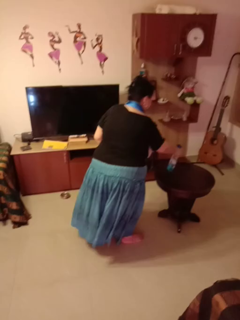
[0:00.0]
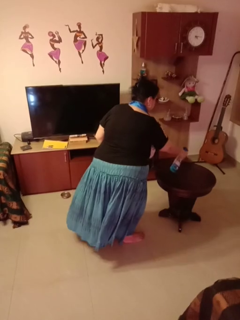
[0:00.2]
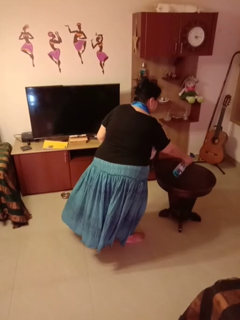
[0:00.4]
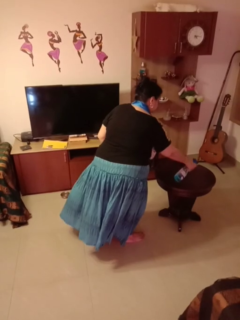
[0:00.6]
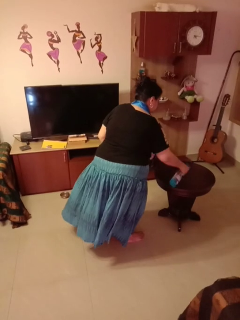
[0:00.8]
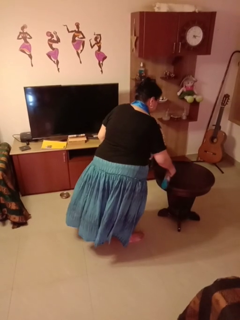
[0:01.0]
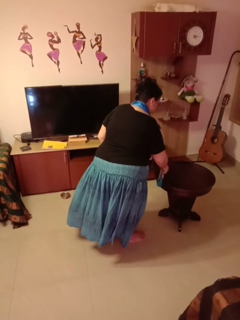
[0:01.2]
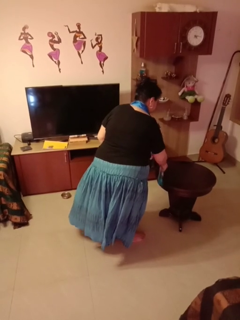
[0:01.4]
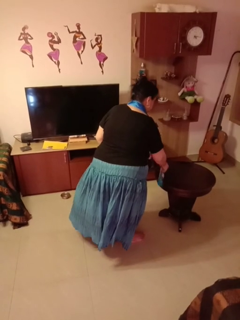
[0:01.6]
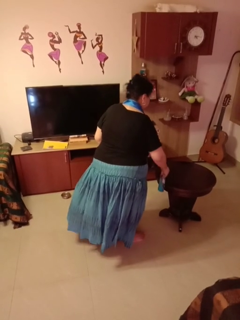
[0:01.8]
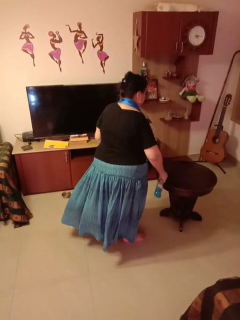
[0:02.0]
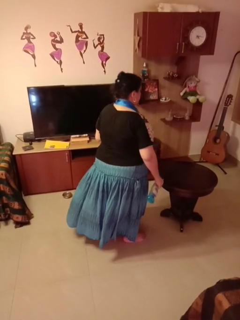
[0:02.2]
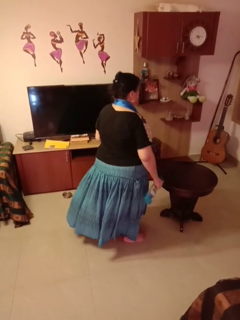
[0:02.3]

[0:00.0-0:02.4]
person sprays from bottle

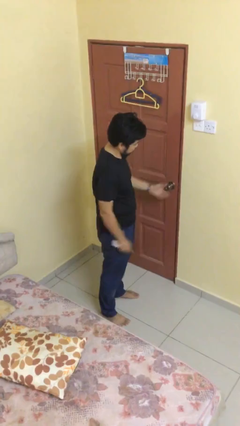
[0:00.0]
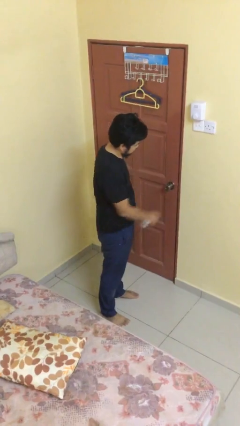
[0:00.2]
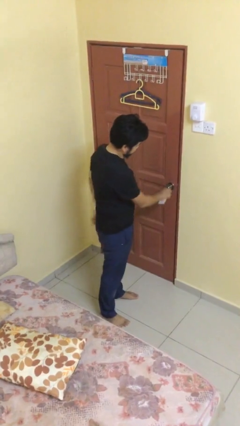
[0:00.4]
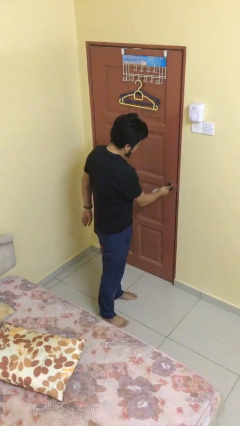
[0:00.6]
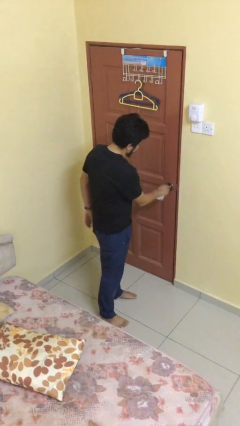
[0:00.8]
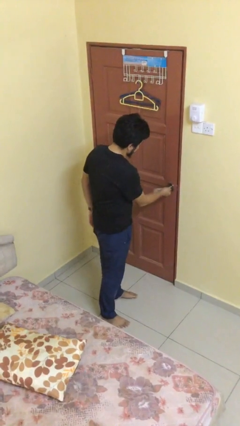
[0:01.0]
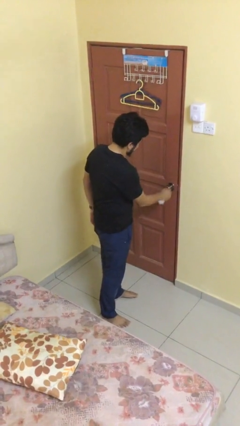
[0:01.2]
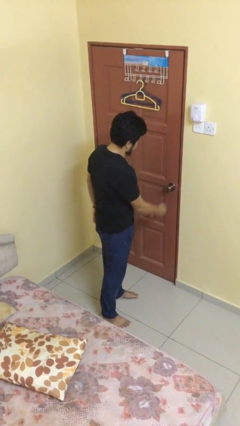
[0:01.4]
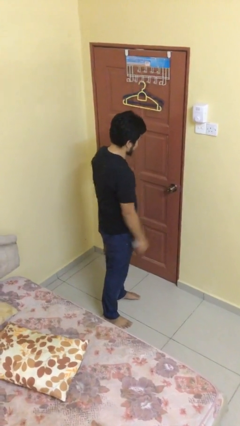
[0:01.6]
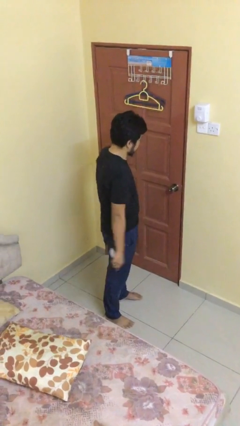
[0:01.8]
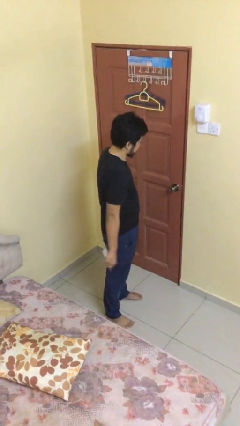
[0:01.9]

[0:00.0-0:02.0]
person locks door with keys

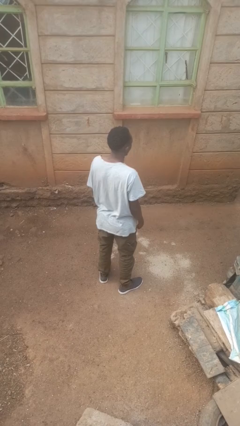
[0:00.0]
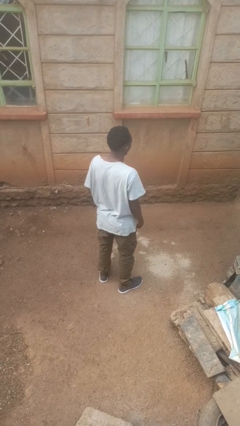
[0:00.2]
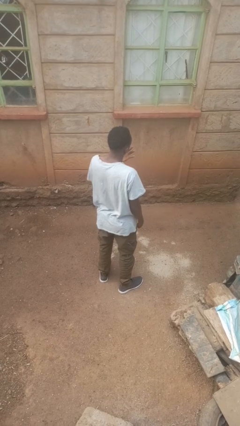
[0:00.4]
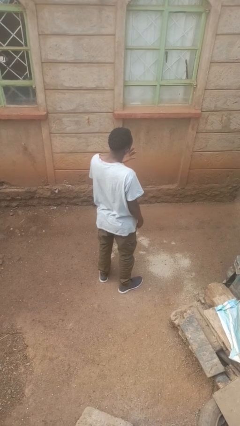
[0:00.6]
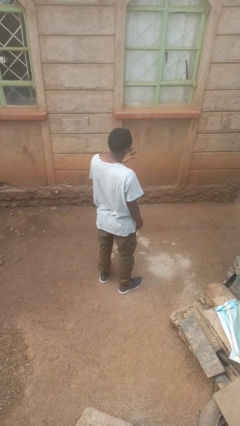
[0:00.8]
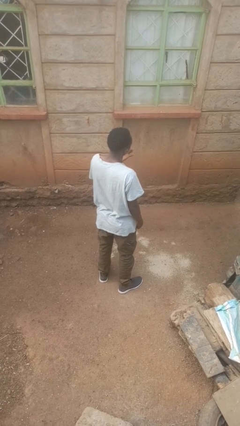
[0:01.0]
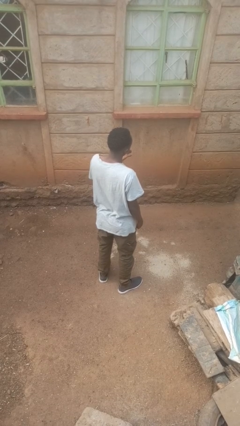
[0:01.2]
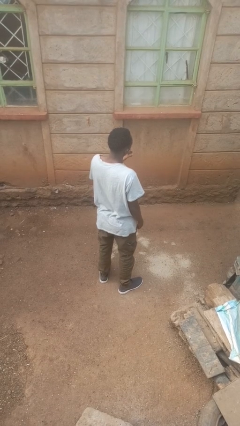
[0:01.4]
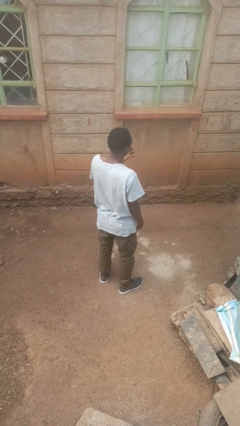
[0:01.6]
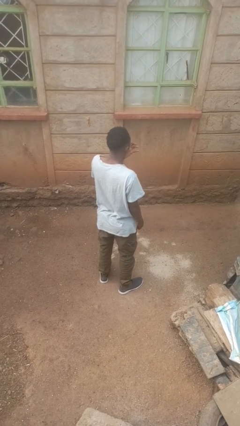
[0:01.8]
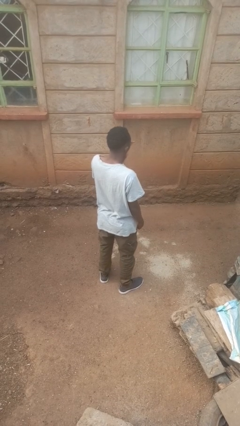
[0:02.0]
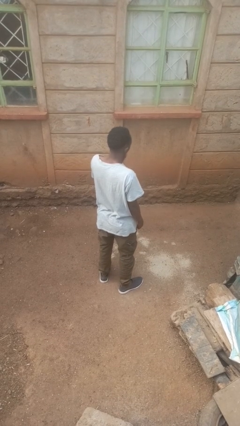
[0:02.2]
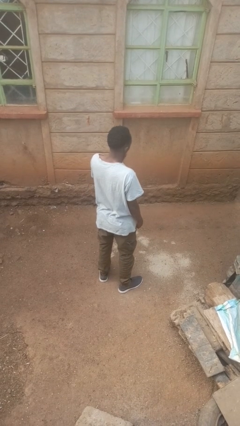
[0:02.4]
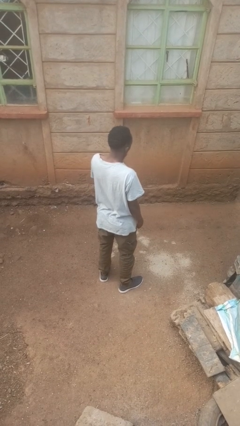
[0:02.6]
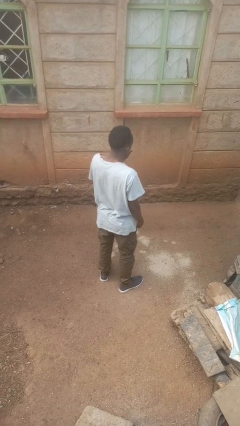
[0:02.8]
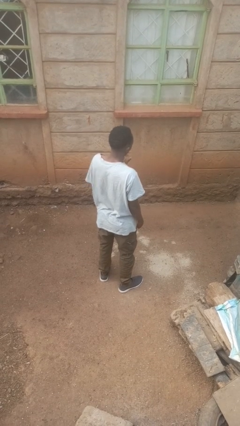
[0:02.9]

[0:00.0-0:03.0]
person licks fingers

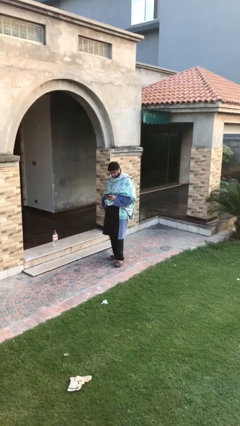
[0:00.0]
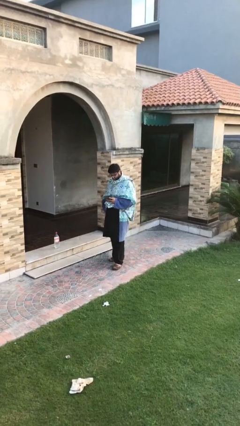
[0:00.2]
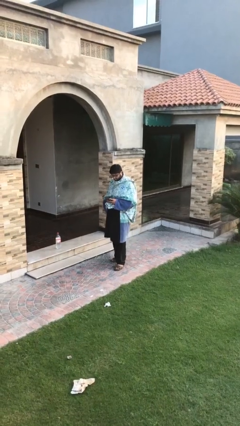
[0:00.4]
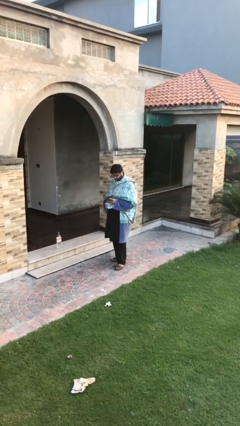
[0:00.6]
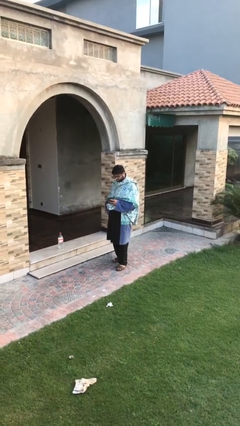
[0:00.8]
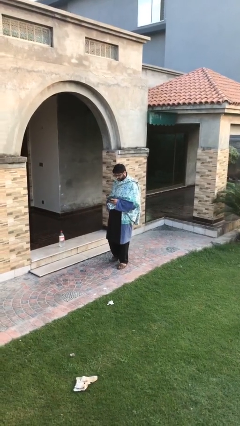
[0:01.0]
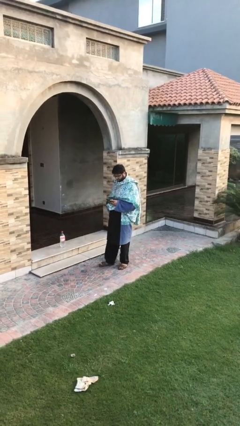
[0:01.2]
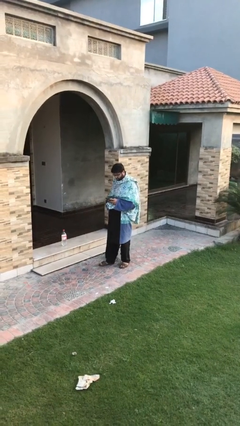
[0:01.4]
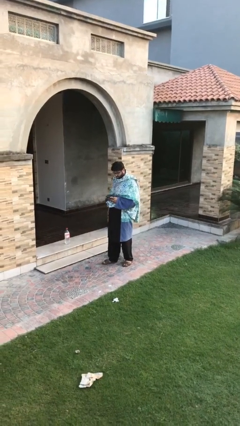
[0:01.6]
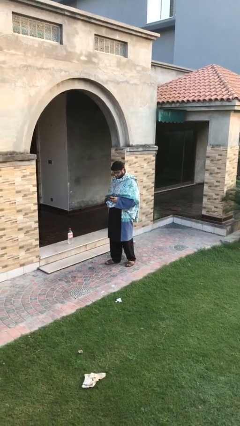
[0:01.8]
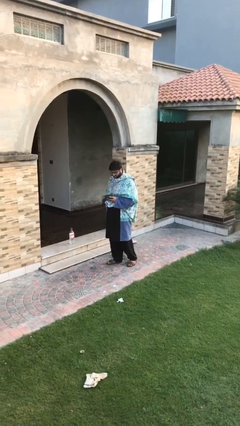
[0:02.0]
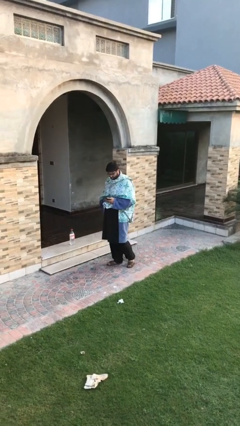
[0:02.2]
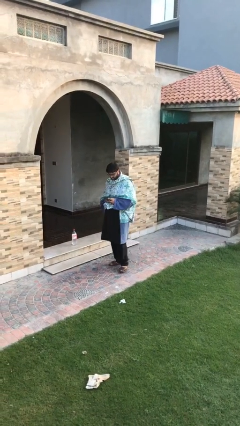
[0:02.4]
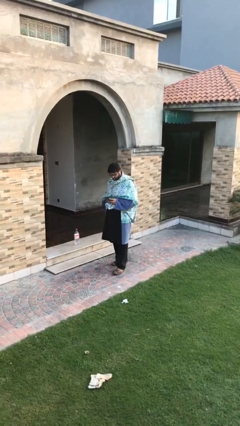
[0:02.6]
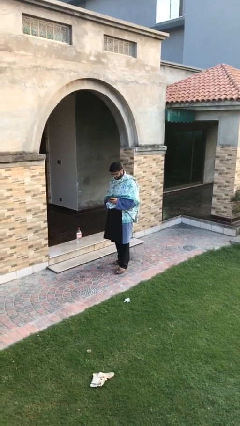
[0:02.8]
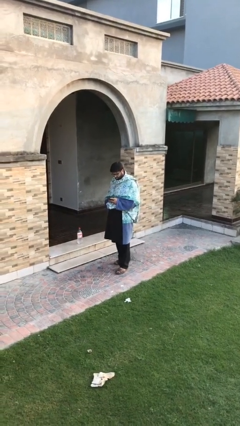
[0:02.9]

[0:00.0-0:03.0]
person texts on phone

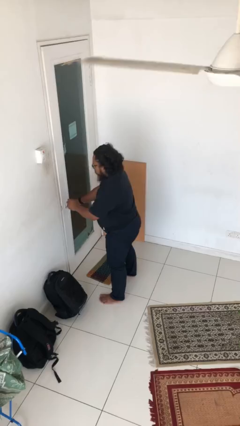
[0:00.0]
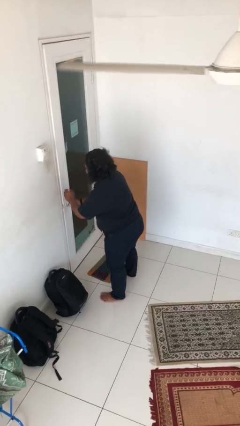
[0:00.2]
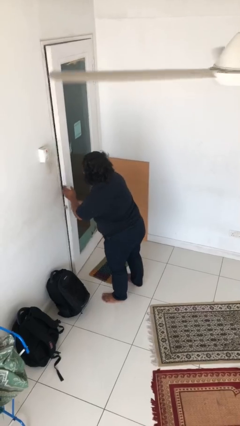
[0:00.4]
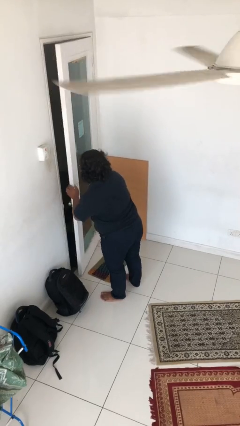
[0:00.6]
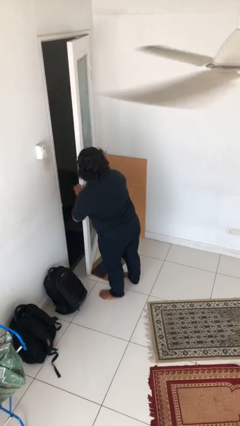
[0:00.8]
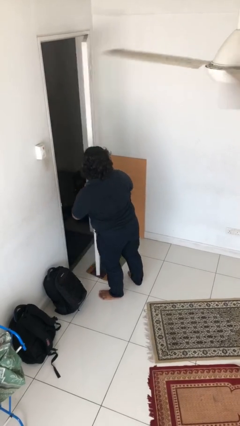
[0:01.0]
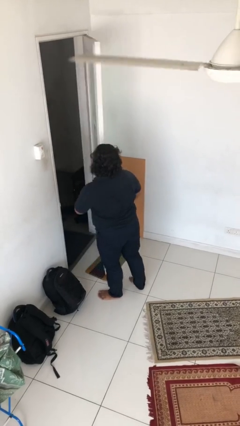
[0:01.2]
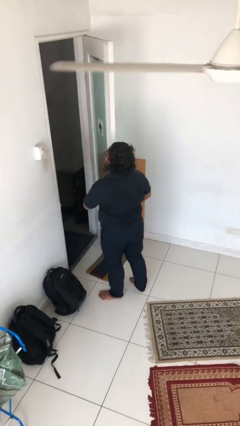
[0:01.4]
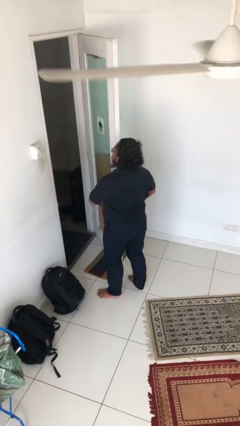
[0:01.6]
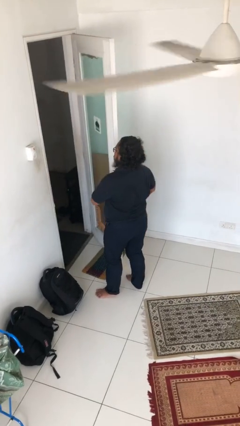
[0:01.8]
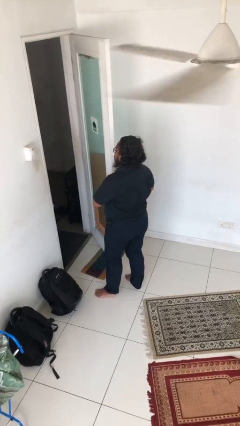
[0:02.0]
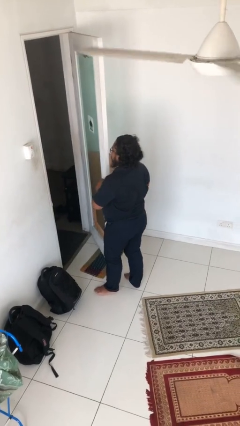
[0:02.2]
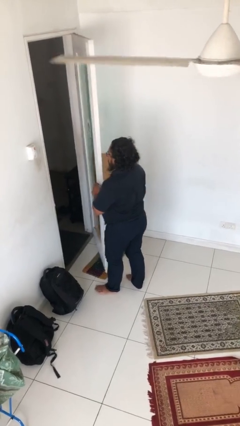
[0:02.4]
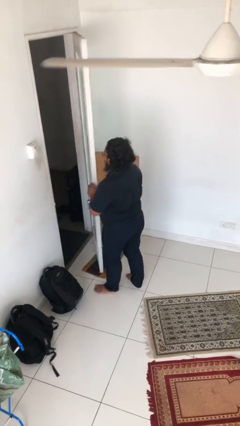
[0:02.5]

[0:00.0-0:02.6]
person opens facility door

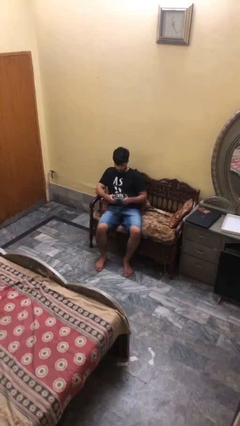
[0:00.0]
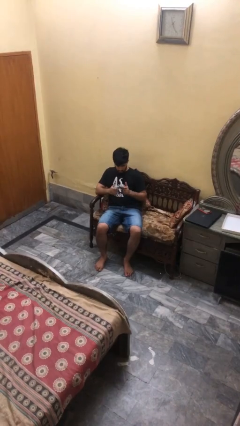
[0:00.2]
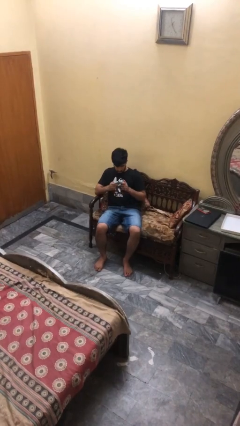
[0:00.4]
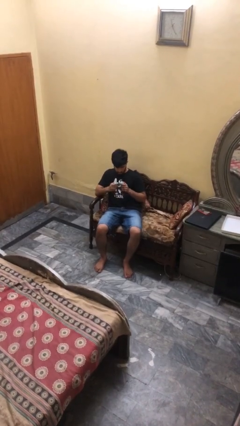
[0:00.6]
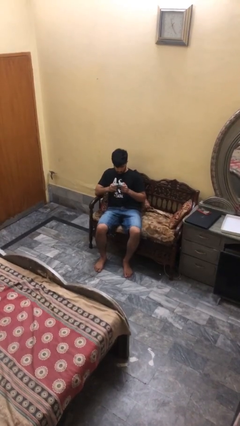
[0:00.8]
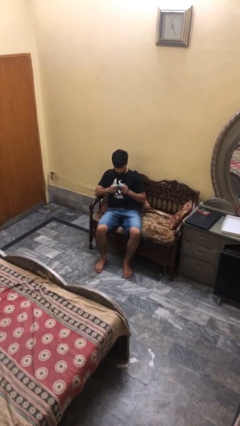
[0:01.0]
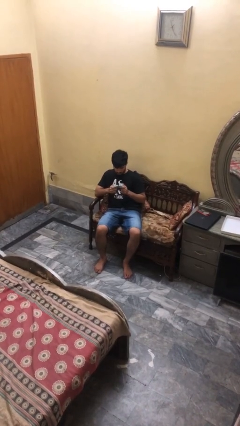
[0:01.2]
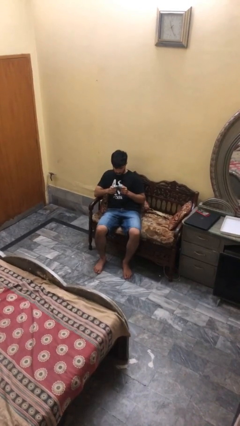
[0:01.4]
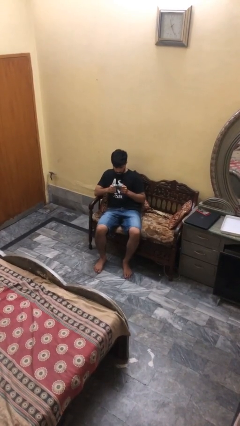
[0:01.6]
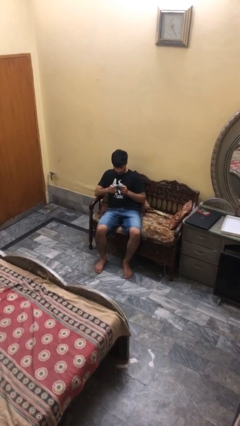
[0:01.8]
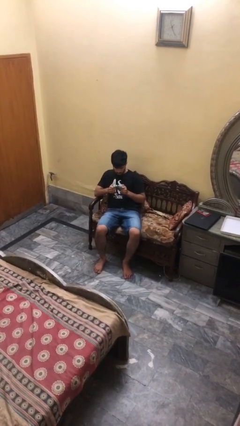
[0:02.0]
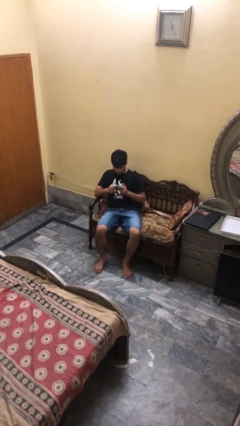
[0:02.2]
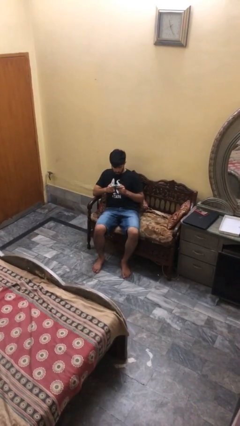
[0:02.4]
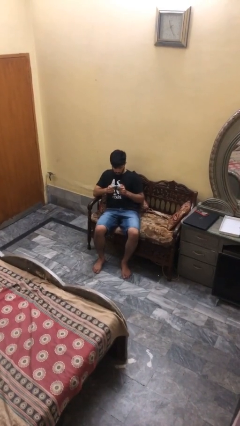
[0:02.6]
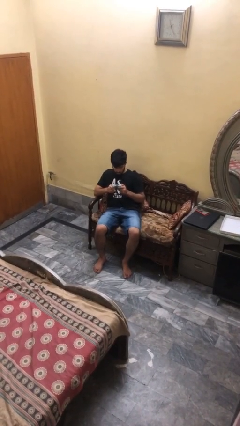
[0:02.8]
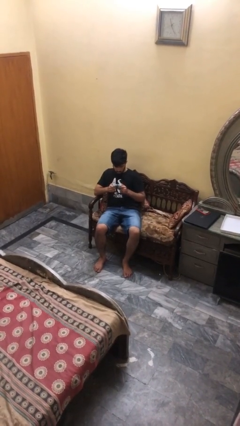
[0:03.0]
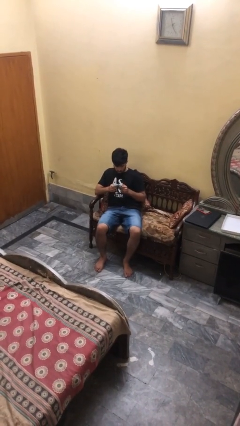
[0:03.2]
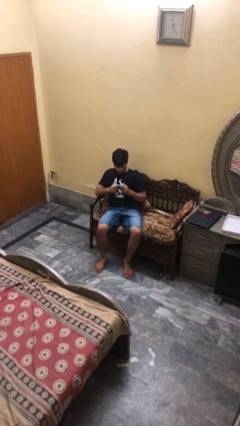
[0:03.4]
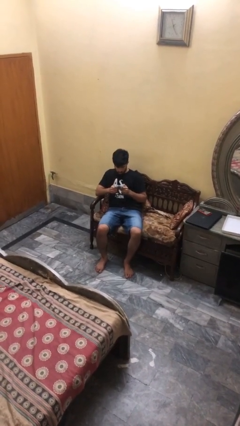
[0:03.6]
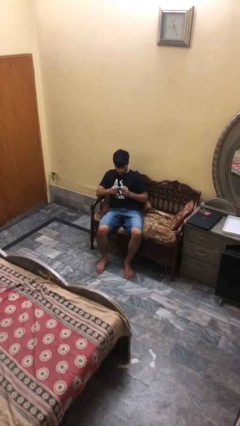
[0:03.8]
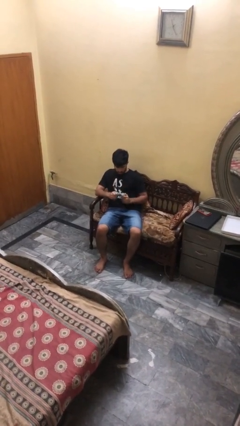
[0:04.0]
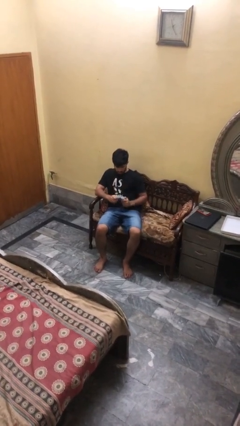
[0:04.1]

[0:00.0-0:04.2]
person interacts with handheld game

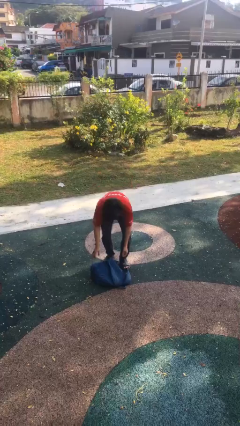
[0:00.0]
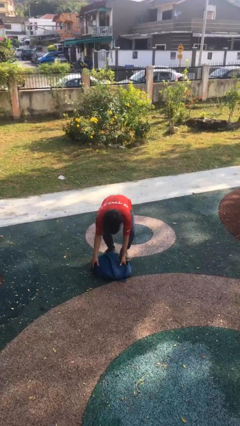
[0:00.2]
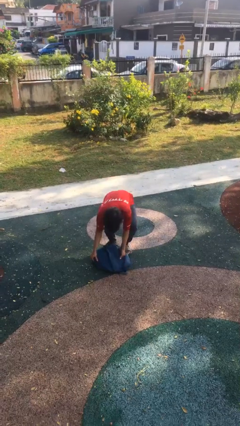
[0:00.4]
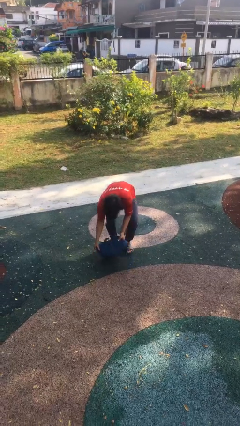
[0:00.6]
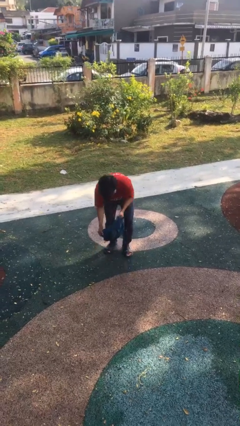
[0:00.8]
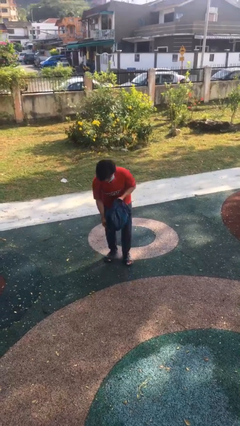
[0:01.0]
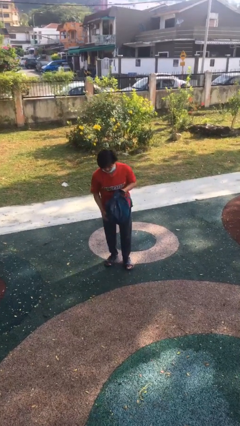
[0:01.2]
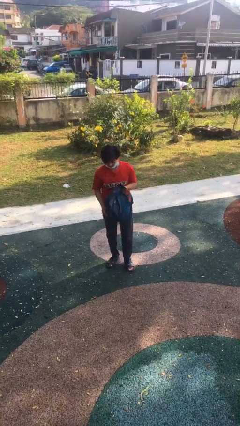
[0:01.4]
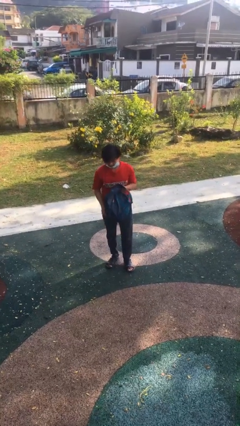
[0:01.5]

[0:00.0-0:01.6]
person picks up object from floor
